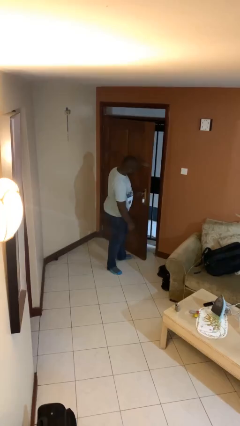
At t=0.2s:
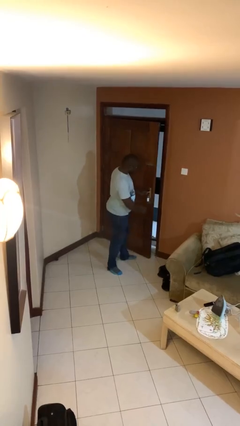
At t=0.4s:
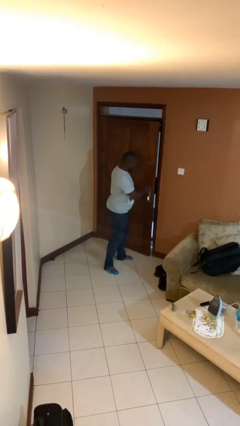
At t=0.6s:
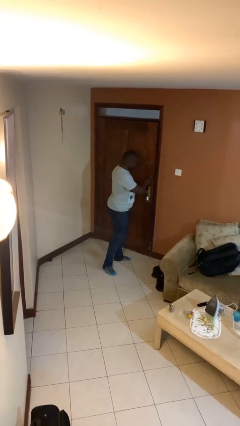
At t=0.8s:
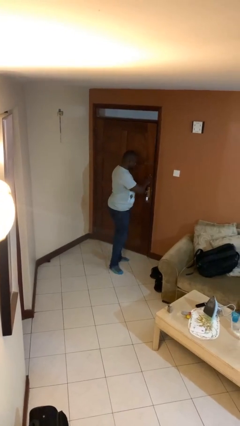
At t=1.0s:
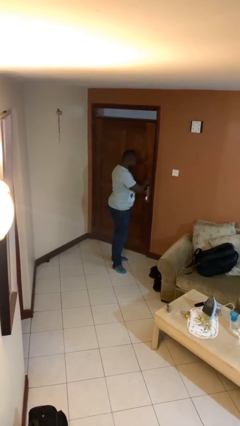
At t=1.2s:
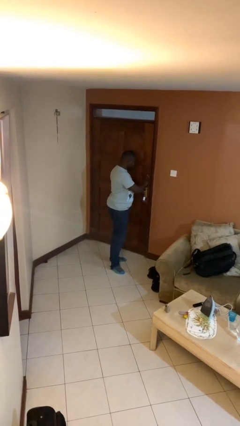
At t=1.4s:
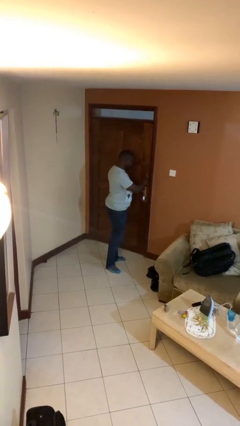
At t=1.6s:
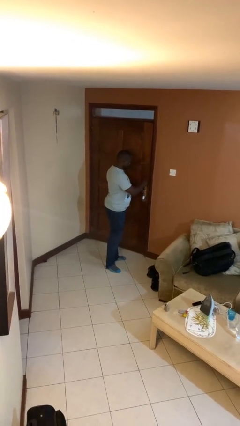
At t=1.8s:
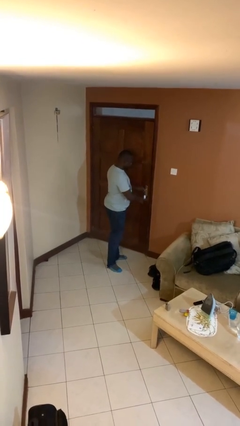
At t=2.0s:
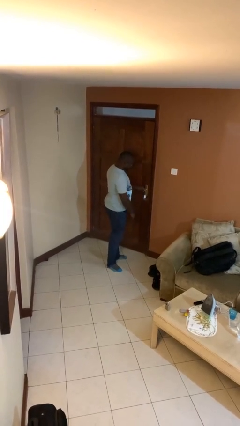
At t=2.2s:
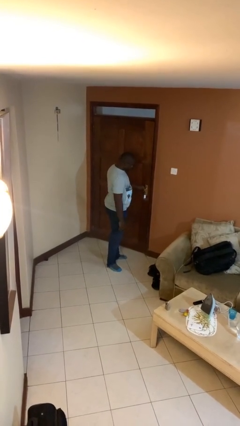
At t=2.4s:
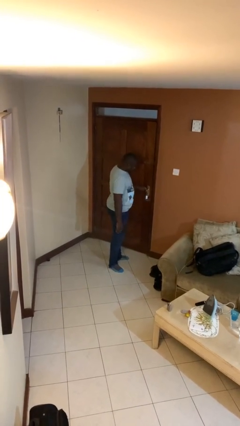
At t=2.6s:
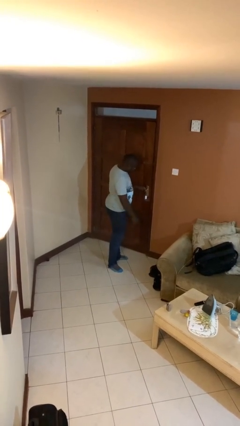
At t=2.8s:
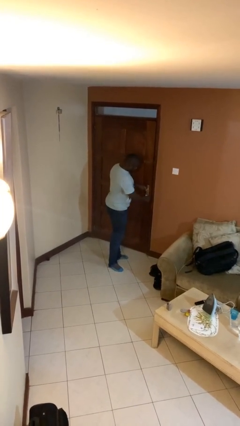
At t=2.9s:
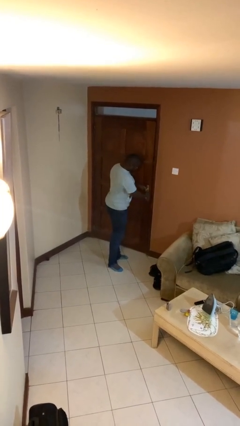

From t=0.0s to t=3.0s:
person closes facility door

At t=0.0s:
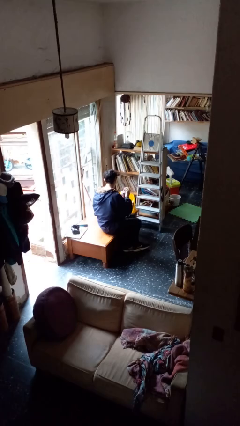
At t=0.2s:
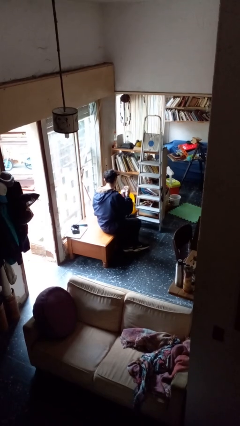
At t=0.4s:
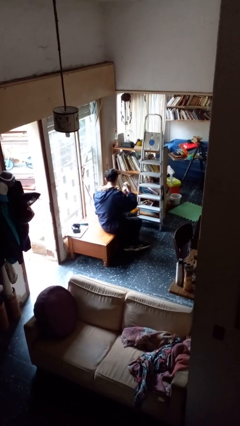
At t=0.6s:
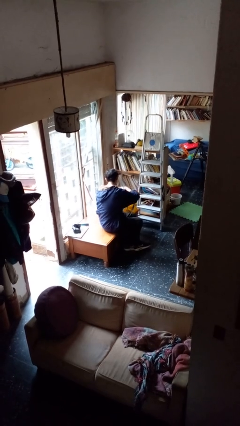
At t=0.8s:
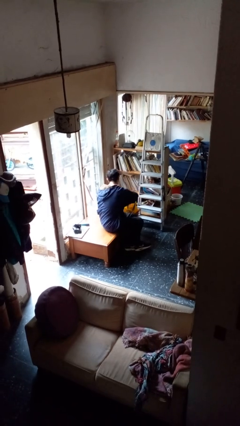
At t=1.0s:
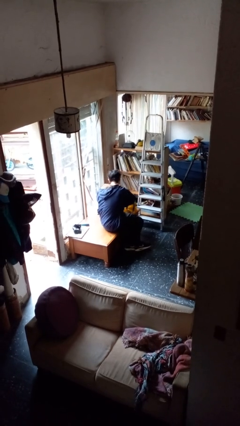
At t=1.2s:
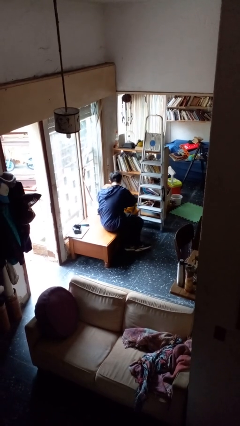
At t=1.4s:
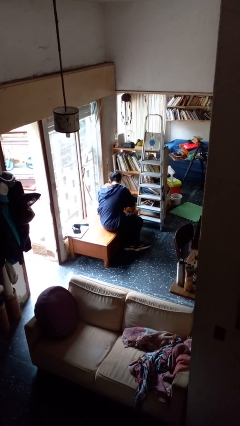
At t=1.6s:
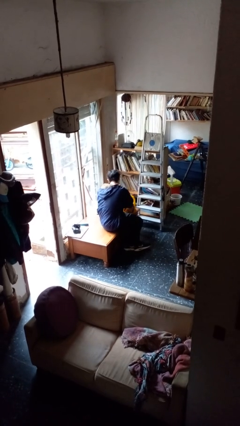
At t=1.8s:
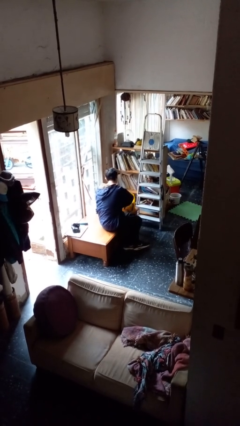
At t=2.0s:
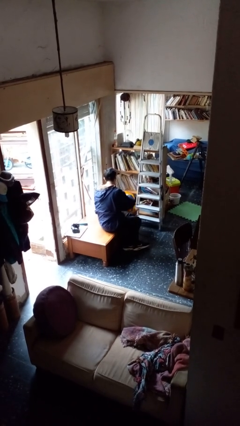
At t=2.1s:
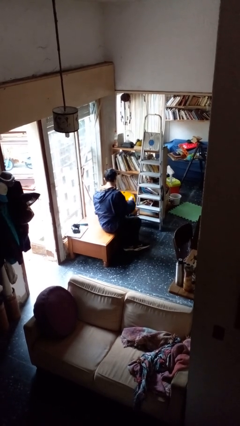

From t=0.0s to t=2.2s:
person puts object into bag

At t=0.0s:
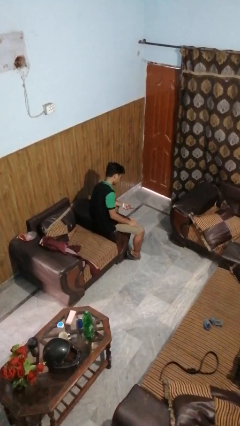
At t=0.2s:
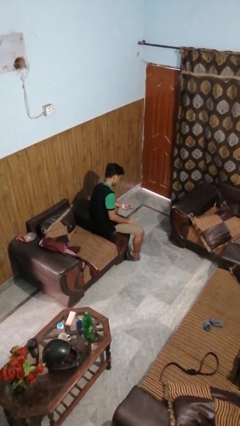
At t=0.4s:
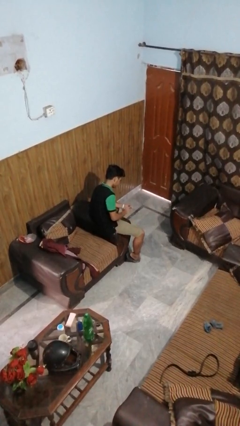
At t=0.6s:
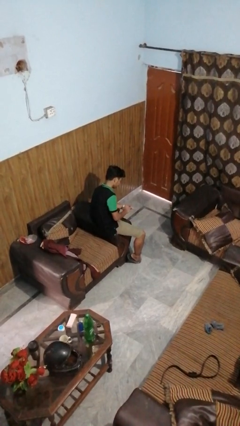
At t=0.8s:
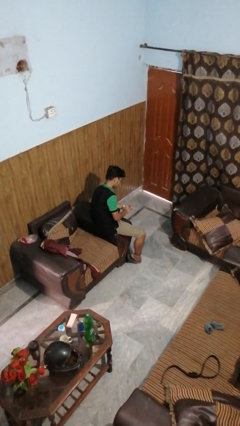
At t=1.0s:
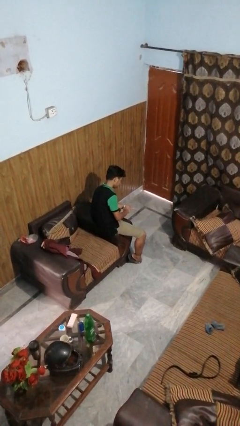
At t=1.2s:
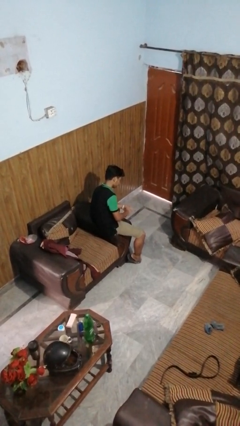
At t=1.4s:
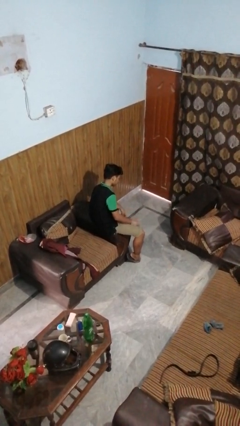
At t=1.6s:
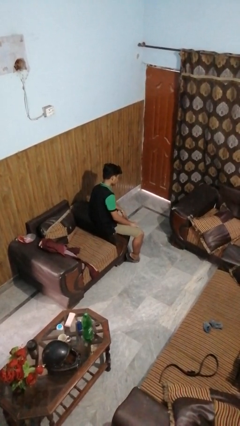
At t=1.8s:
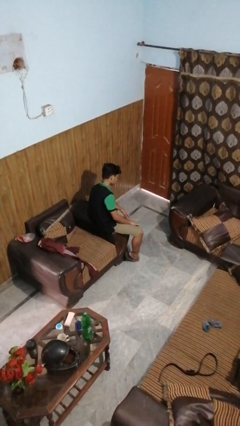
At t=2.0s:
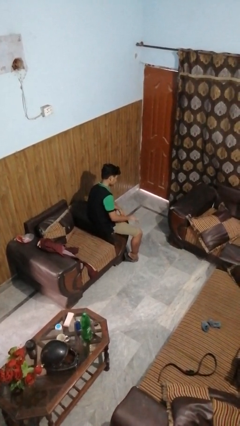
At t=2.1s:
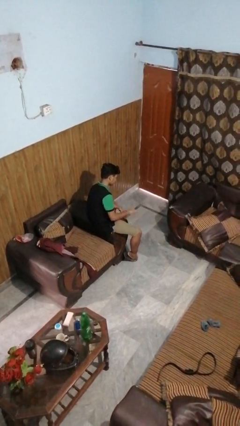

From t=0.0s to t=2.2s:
person puts on ring

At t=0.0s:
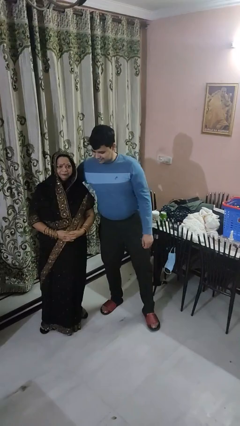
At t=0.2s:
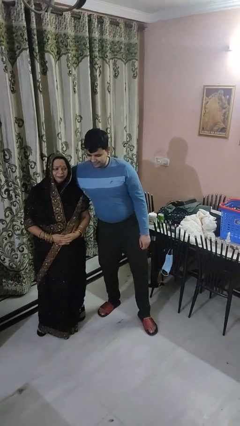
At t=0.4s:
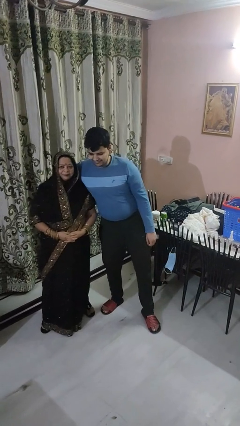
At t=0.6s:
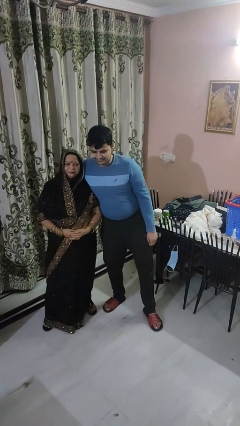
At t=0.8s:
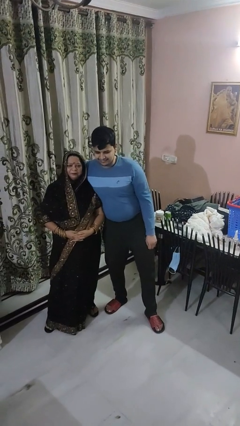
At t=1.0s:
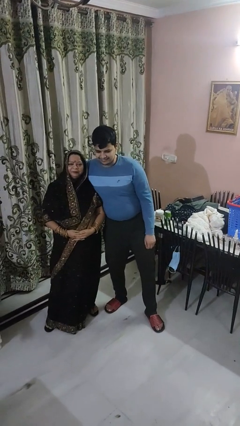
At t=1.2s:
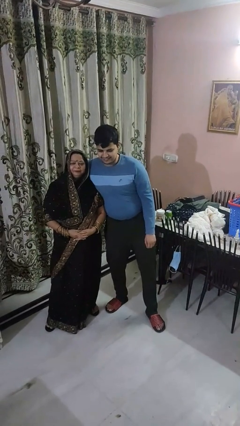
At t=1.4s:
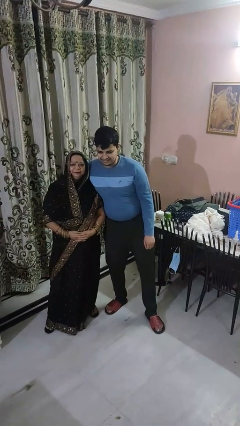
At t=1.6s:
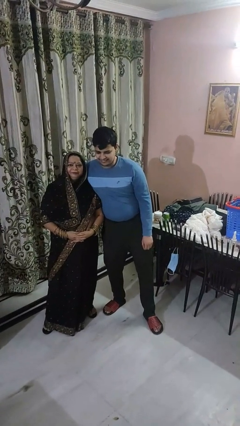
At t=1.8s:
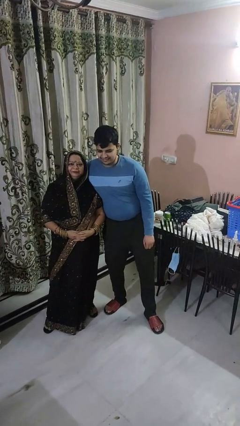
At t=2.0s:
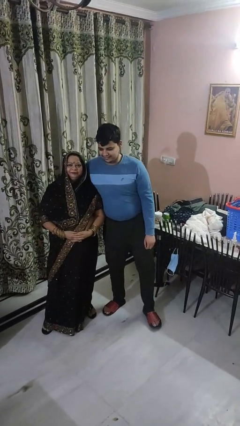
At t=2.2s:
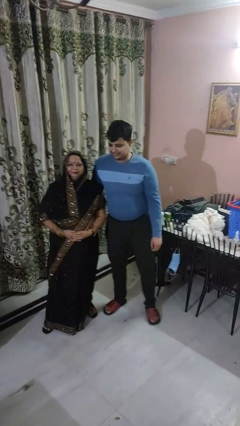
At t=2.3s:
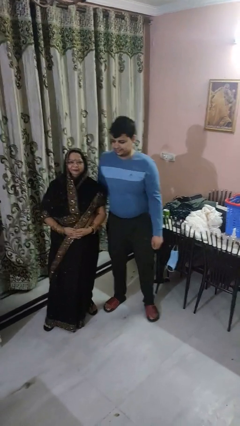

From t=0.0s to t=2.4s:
person hugs person from side

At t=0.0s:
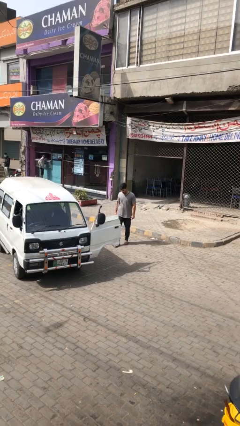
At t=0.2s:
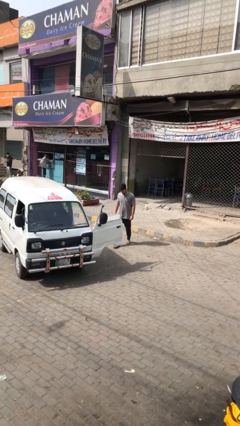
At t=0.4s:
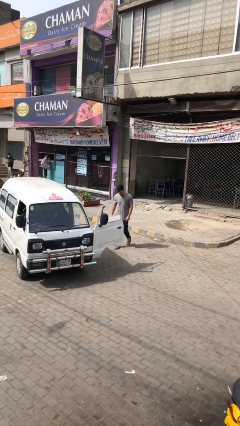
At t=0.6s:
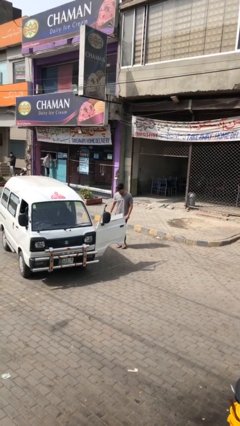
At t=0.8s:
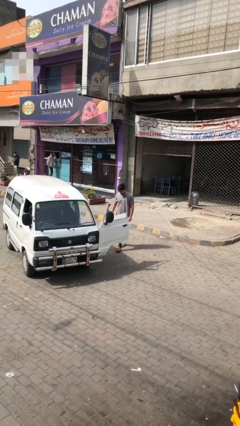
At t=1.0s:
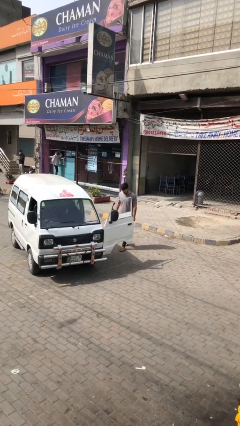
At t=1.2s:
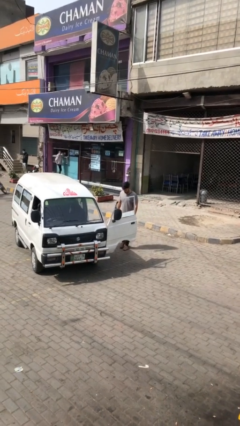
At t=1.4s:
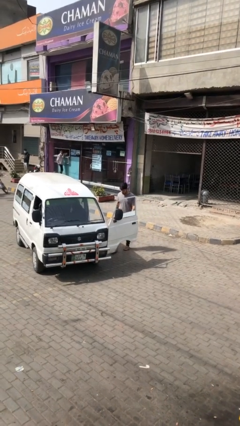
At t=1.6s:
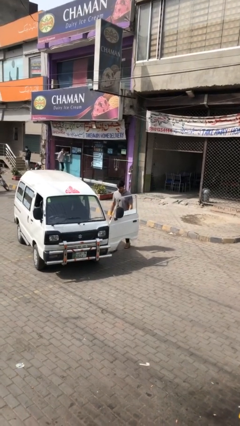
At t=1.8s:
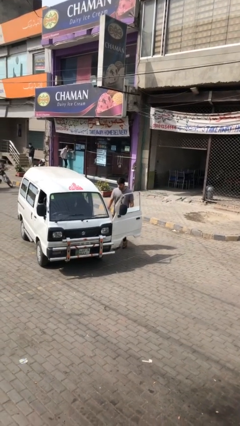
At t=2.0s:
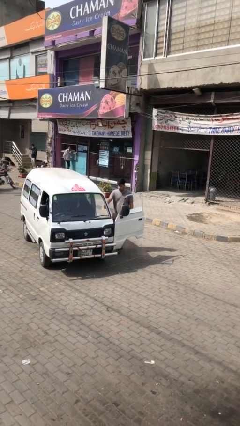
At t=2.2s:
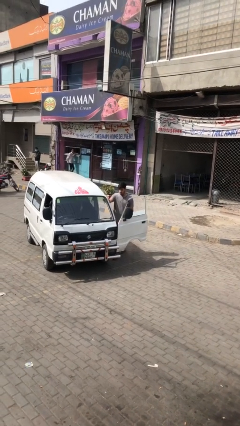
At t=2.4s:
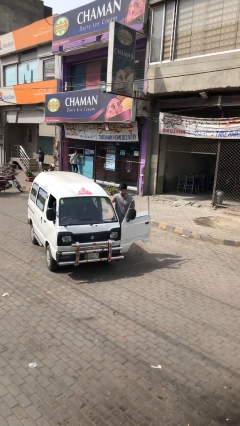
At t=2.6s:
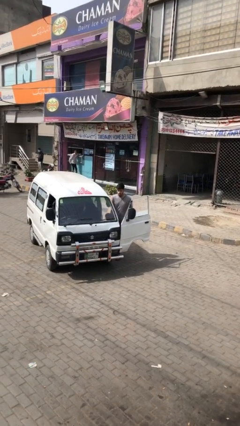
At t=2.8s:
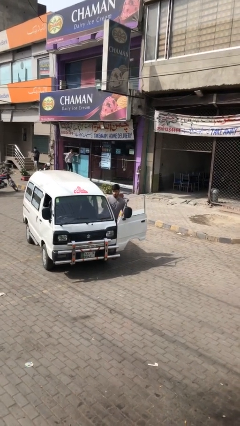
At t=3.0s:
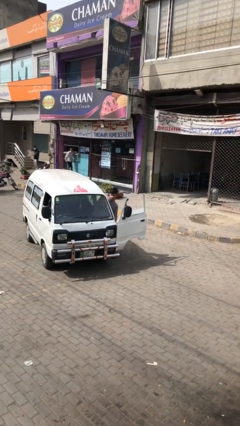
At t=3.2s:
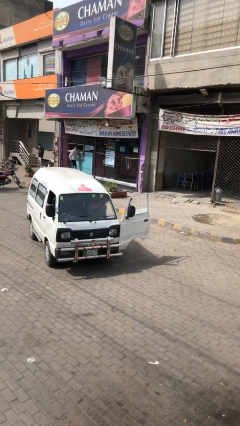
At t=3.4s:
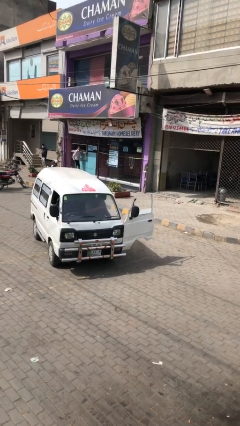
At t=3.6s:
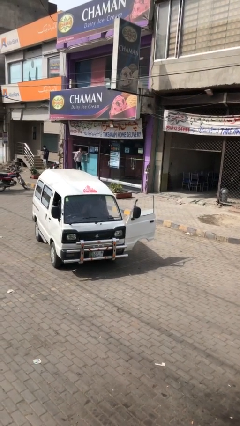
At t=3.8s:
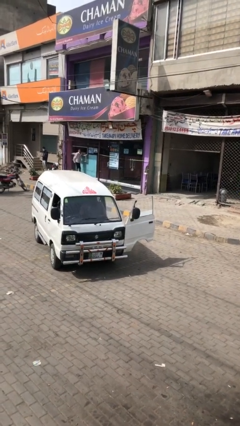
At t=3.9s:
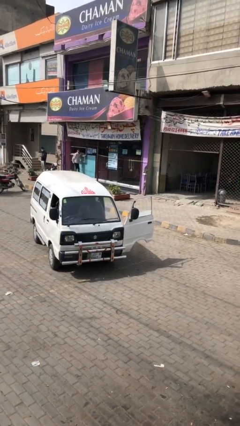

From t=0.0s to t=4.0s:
person enters car

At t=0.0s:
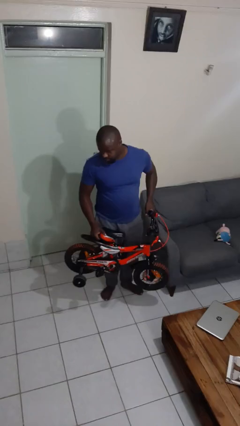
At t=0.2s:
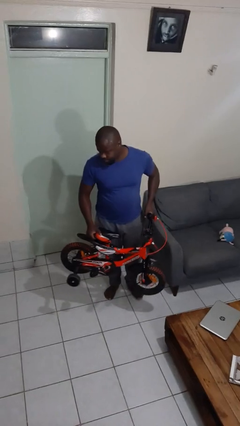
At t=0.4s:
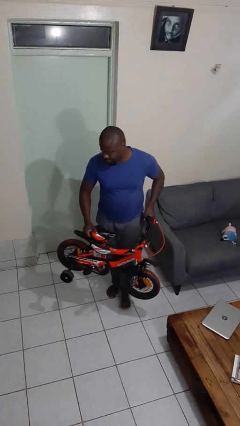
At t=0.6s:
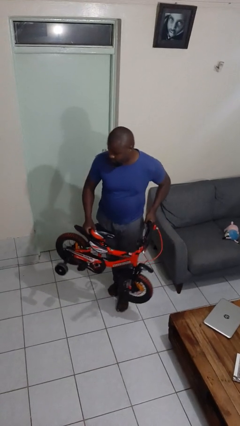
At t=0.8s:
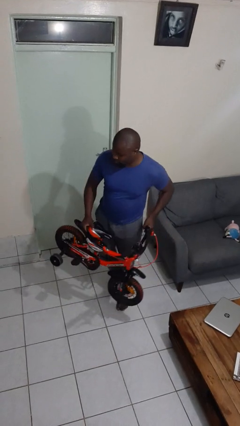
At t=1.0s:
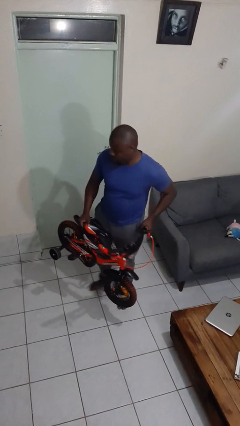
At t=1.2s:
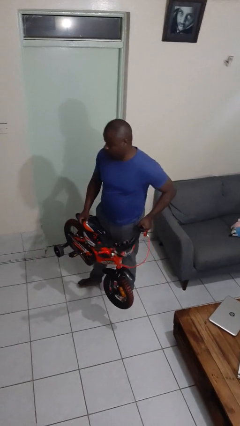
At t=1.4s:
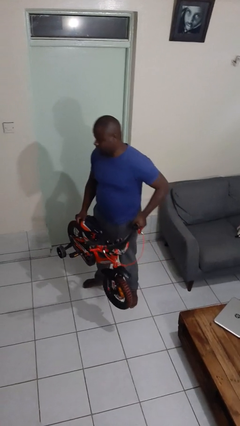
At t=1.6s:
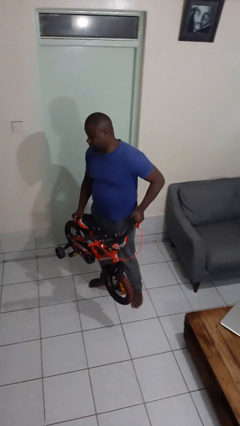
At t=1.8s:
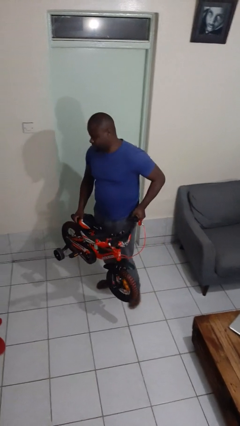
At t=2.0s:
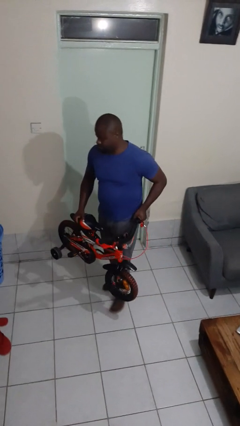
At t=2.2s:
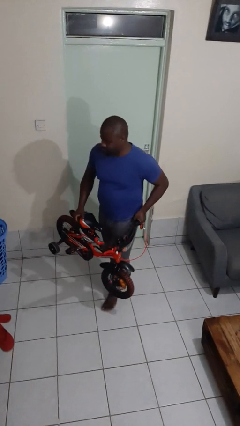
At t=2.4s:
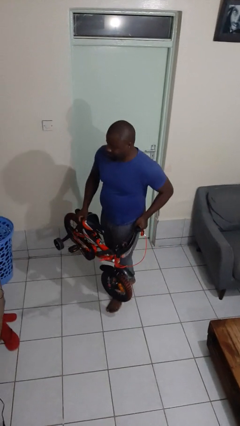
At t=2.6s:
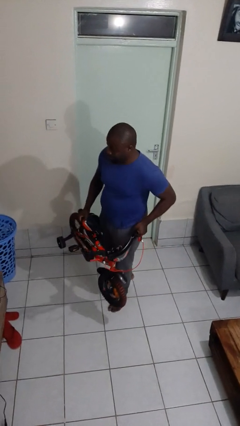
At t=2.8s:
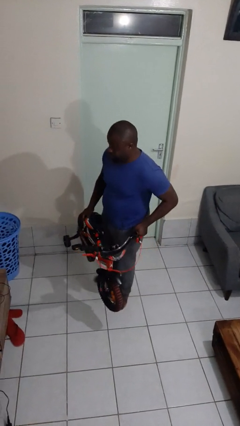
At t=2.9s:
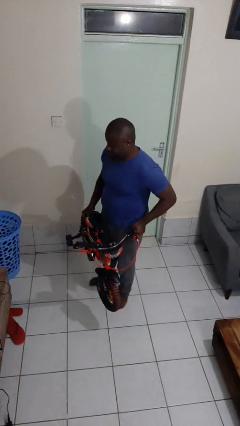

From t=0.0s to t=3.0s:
person carries bicycle

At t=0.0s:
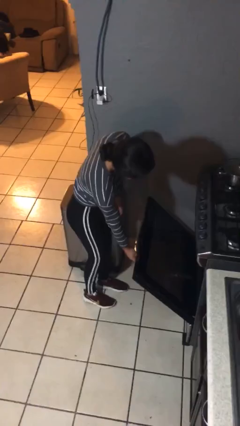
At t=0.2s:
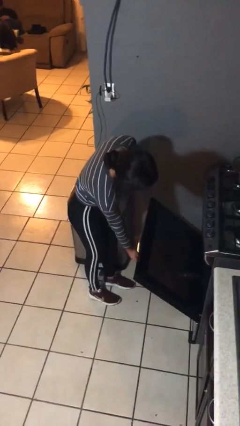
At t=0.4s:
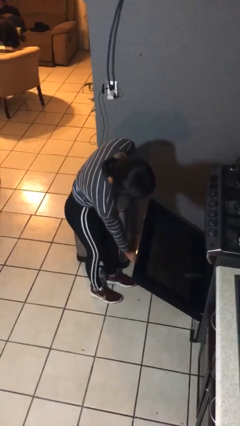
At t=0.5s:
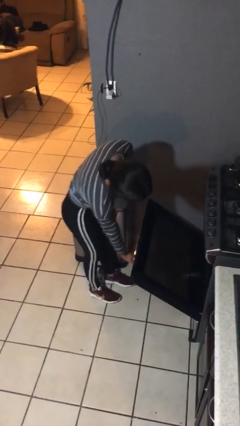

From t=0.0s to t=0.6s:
person opens oven door
